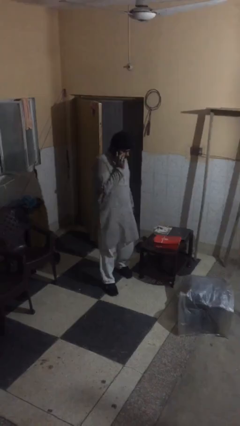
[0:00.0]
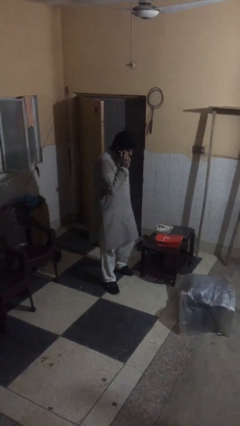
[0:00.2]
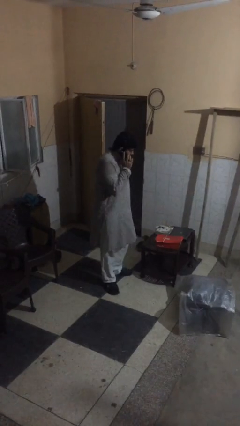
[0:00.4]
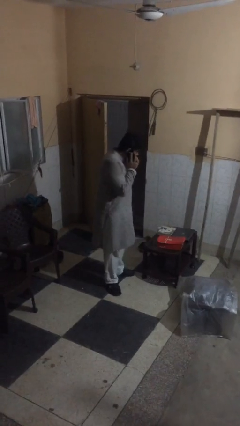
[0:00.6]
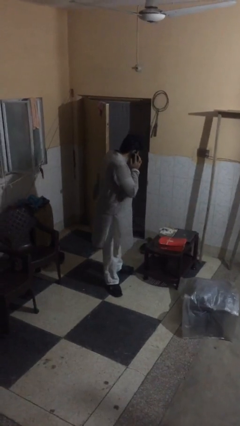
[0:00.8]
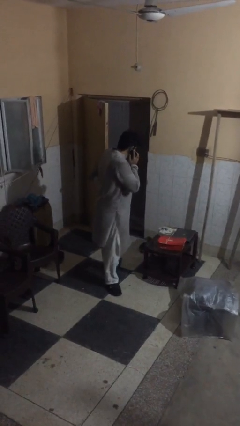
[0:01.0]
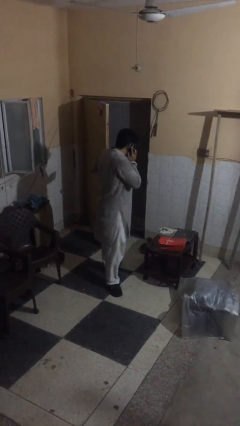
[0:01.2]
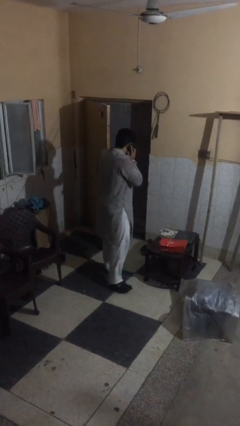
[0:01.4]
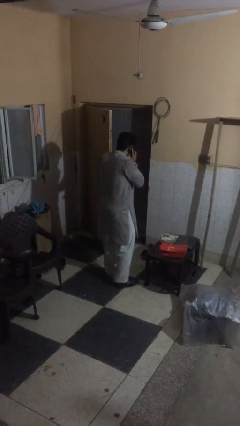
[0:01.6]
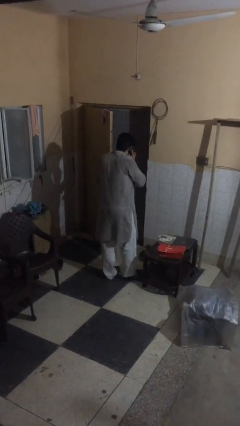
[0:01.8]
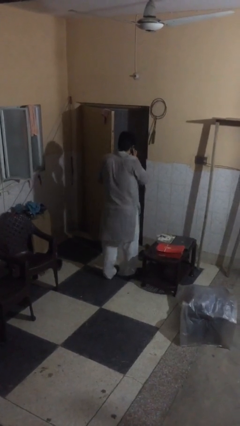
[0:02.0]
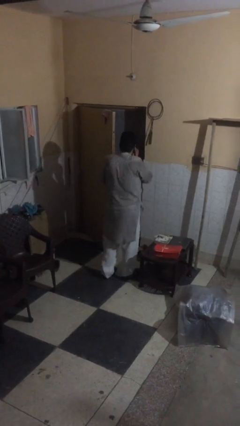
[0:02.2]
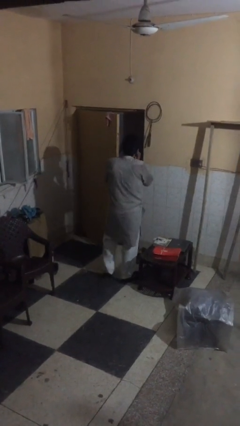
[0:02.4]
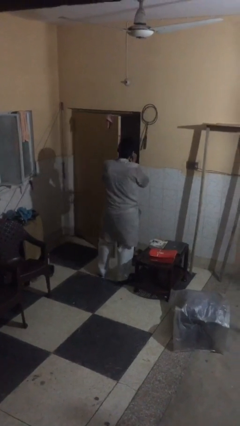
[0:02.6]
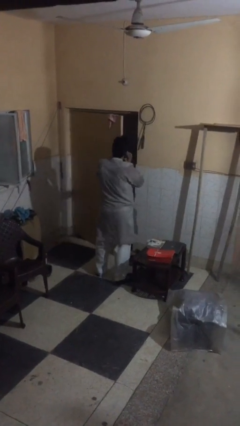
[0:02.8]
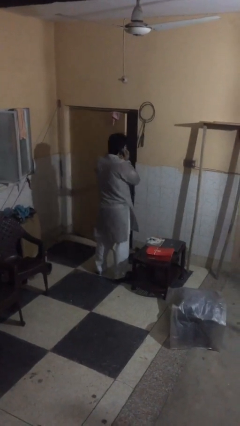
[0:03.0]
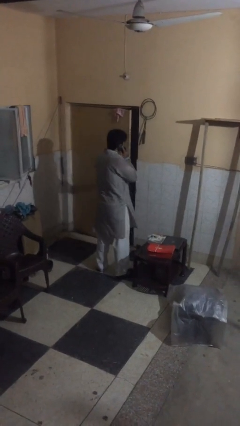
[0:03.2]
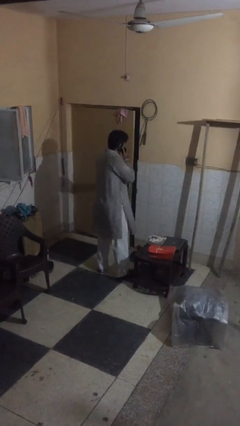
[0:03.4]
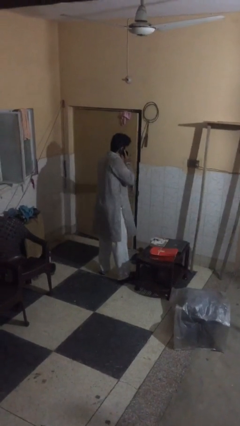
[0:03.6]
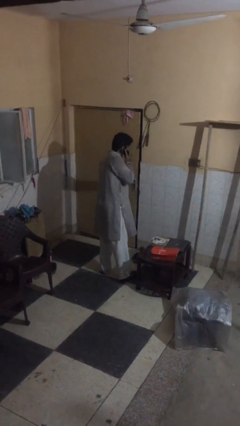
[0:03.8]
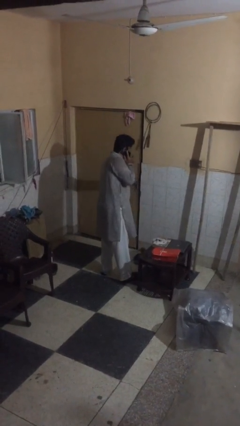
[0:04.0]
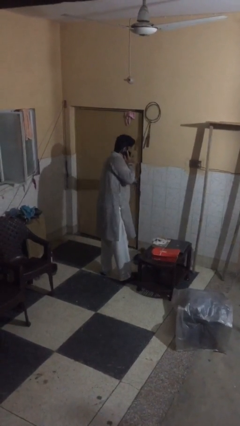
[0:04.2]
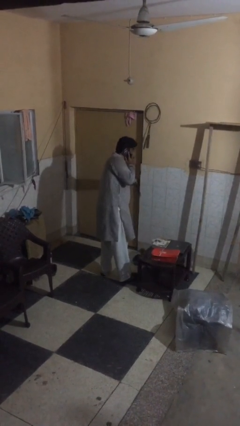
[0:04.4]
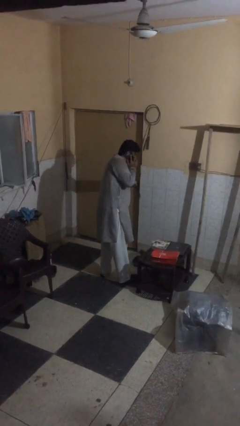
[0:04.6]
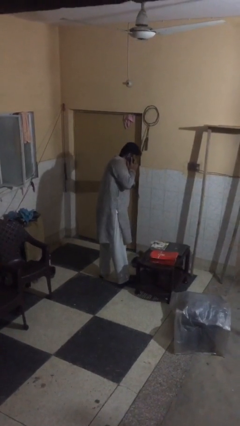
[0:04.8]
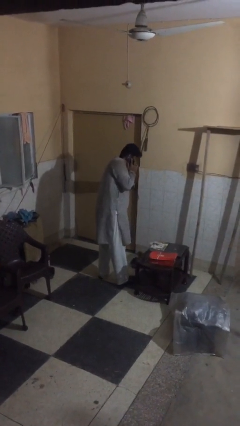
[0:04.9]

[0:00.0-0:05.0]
person closes facility door

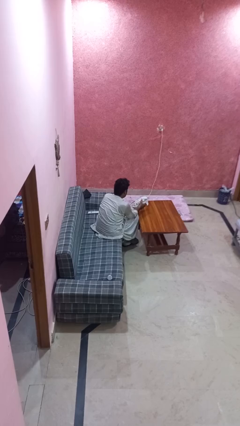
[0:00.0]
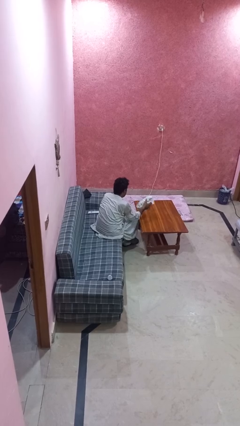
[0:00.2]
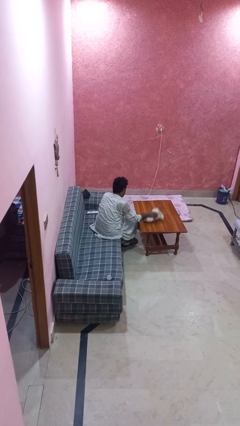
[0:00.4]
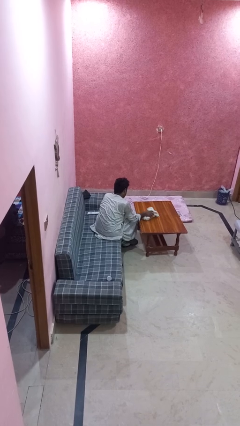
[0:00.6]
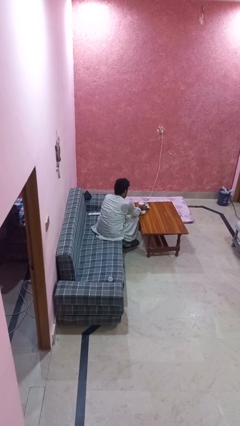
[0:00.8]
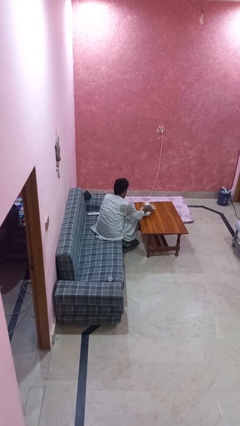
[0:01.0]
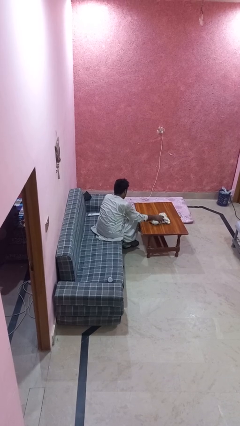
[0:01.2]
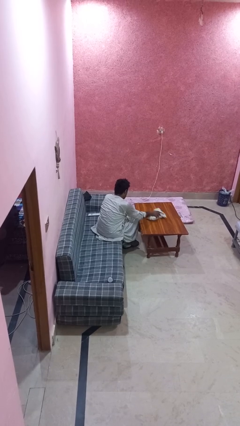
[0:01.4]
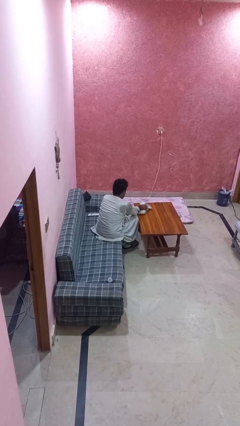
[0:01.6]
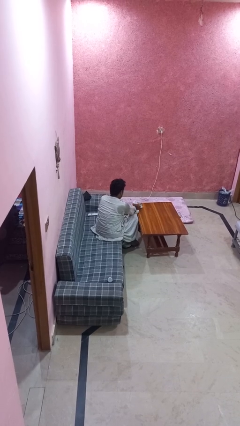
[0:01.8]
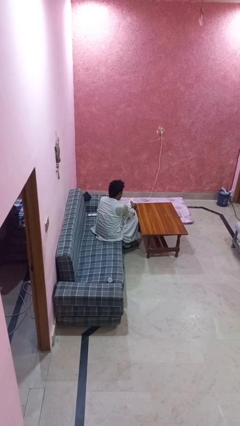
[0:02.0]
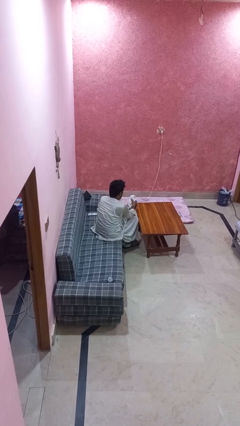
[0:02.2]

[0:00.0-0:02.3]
person cleans table with rag

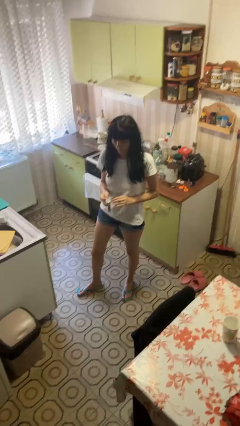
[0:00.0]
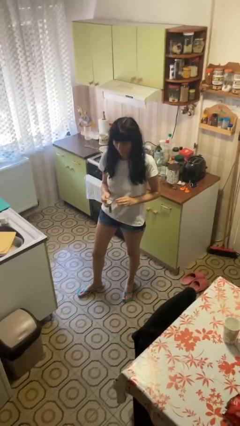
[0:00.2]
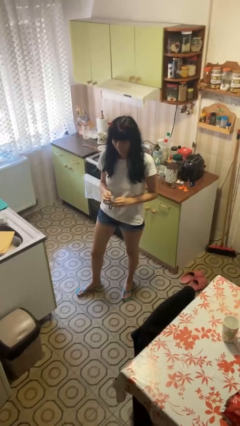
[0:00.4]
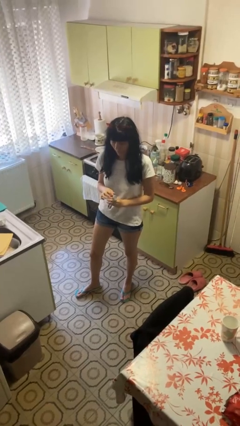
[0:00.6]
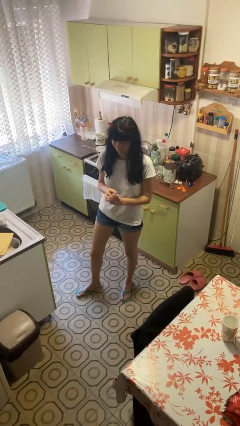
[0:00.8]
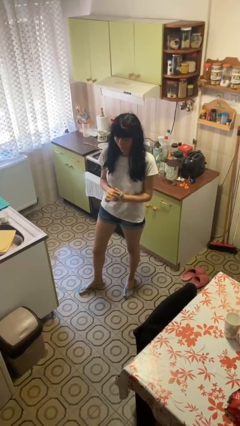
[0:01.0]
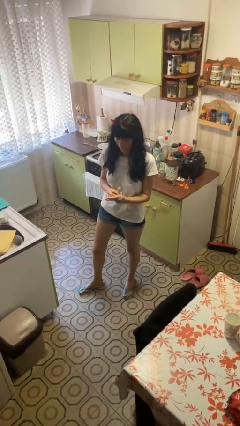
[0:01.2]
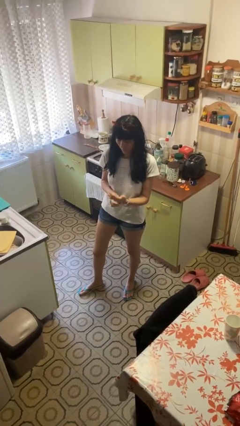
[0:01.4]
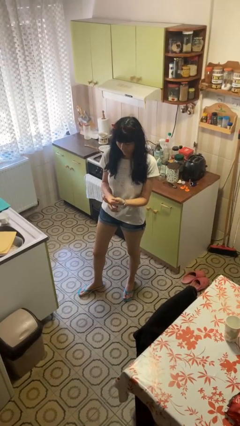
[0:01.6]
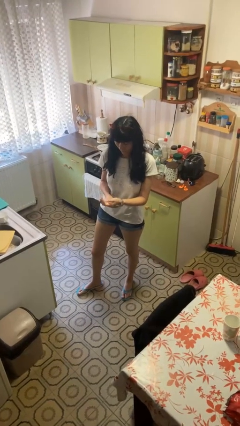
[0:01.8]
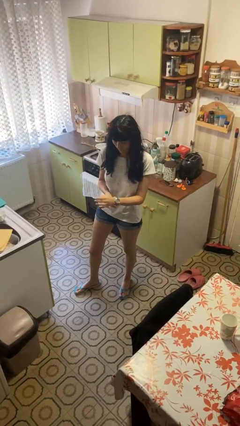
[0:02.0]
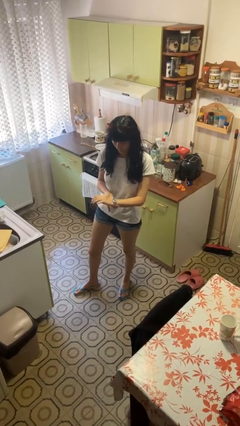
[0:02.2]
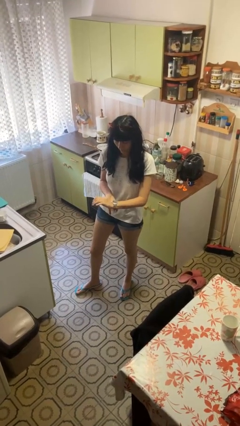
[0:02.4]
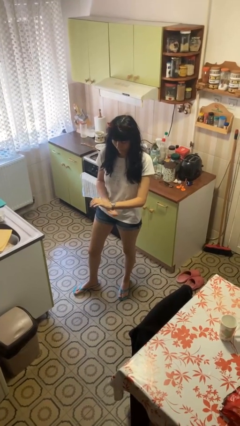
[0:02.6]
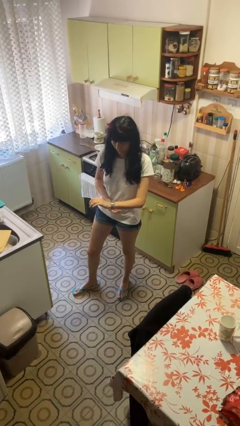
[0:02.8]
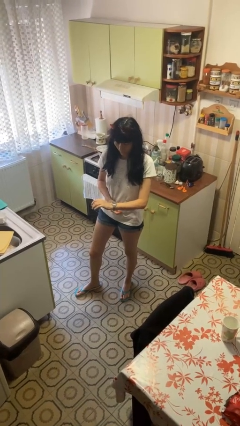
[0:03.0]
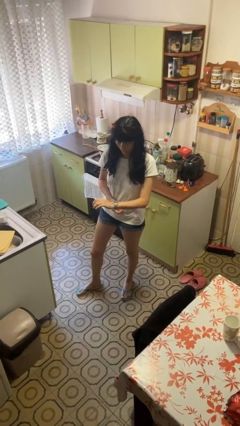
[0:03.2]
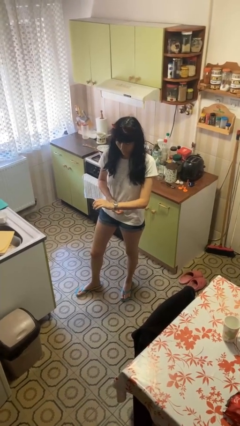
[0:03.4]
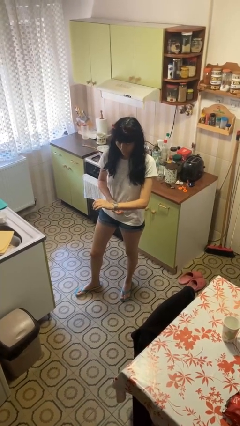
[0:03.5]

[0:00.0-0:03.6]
person puts on wristwatch

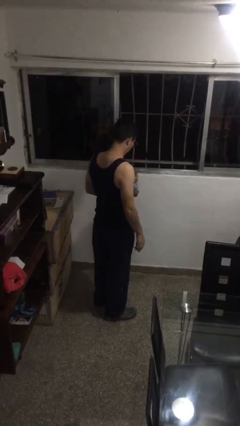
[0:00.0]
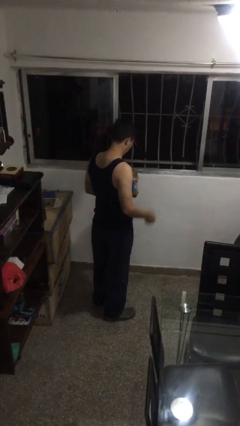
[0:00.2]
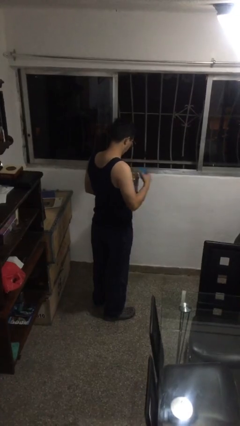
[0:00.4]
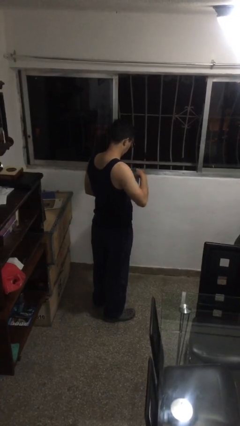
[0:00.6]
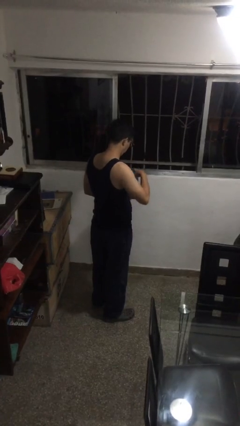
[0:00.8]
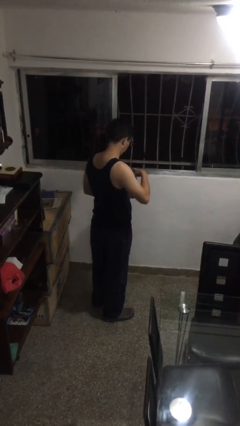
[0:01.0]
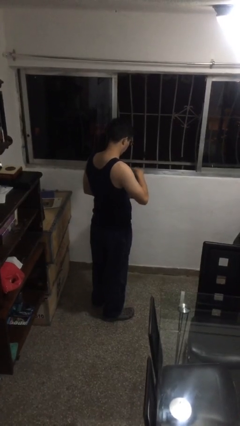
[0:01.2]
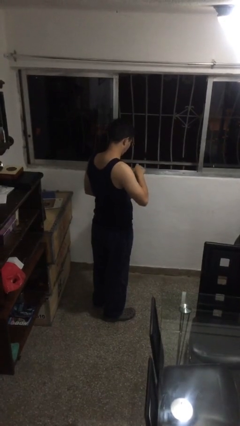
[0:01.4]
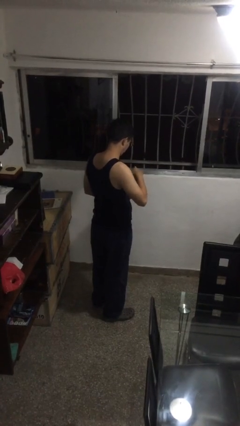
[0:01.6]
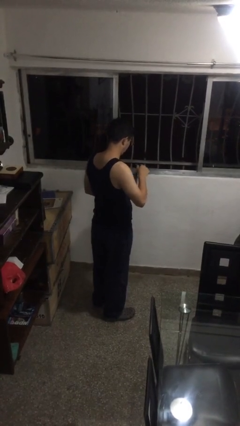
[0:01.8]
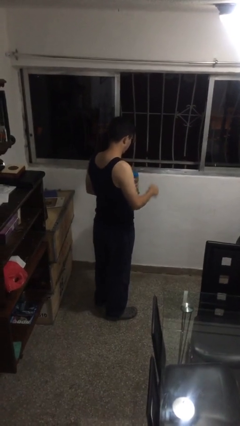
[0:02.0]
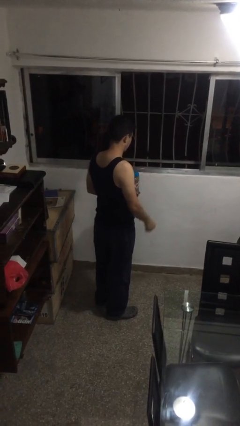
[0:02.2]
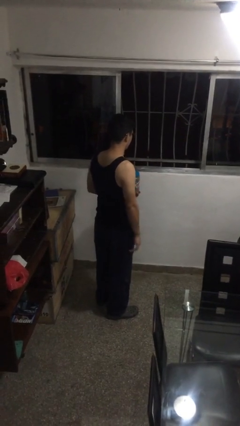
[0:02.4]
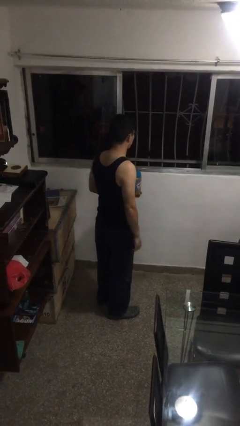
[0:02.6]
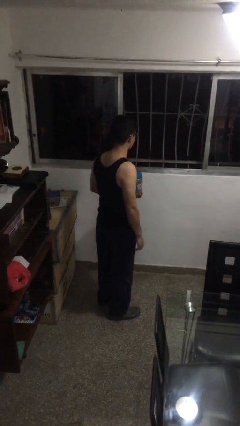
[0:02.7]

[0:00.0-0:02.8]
person closes jar

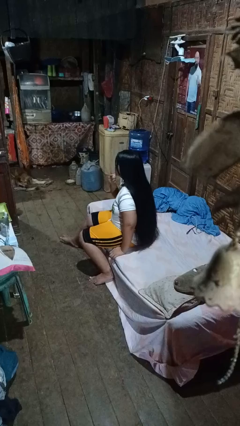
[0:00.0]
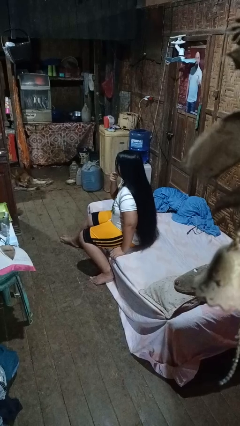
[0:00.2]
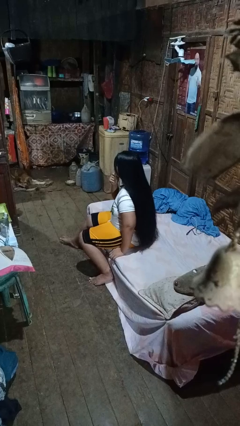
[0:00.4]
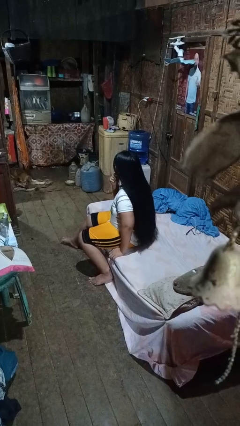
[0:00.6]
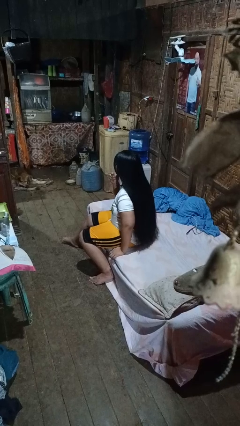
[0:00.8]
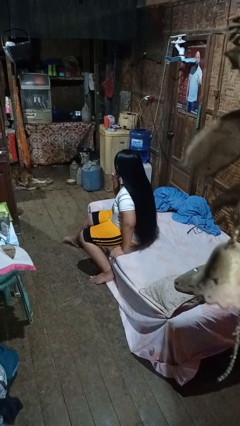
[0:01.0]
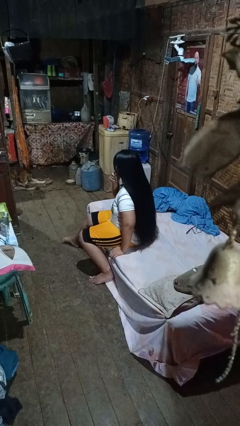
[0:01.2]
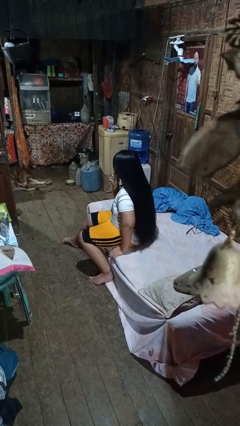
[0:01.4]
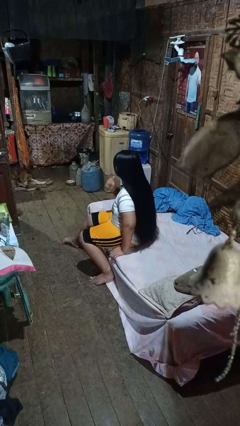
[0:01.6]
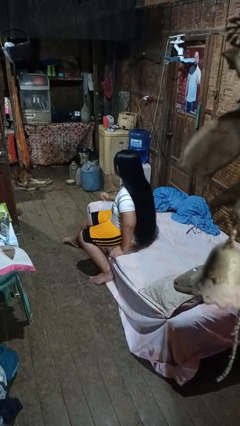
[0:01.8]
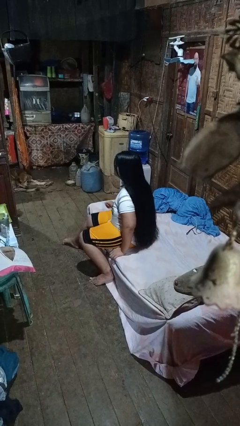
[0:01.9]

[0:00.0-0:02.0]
person strokes chin

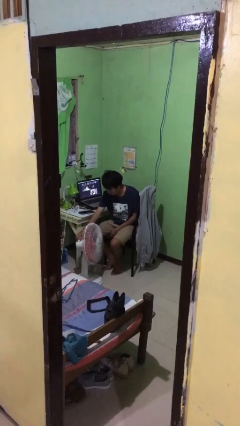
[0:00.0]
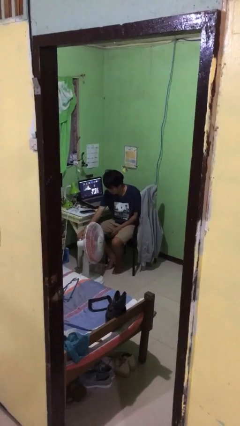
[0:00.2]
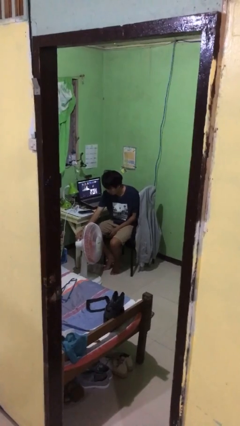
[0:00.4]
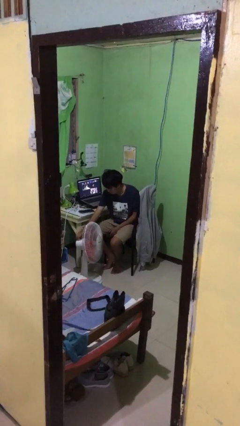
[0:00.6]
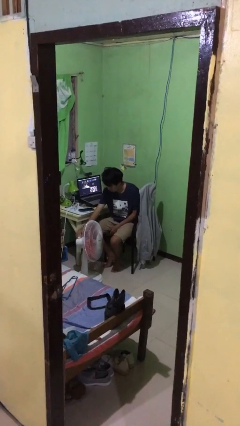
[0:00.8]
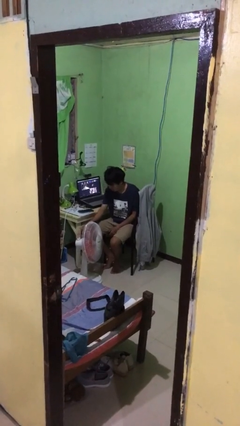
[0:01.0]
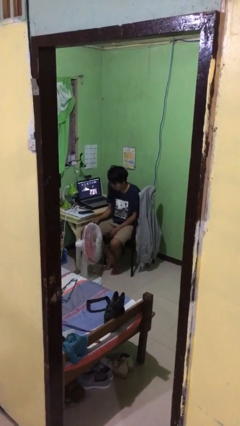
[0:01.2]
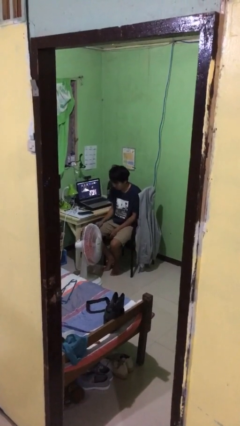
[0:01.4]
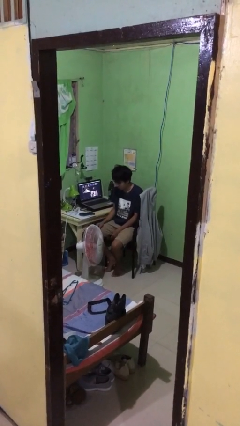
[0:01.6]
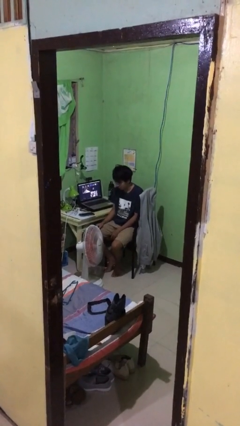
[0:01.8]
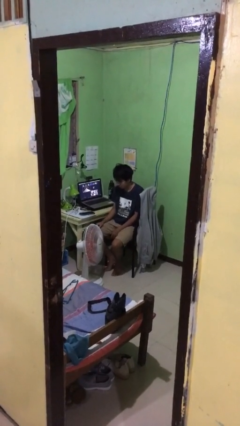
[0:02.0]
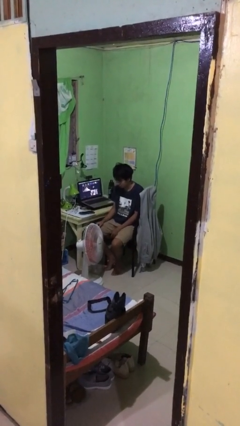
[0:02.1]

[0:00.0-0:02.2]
person turns off fan
